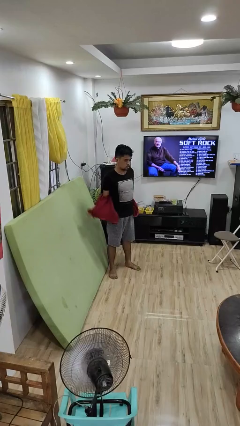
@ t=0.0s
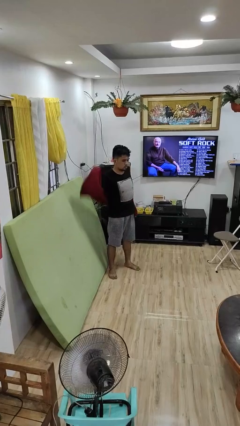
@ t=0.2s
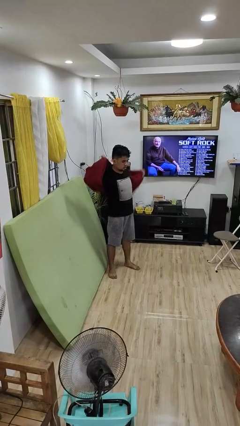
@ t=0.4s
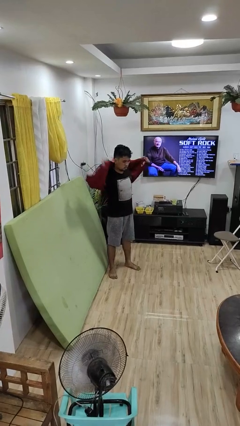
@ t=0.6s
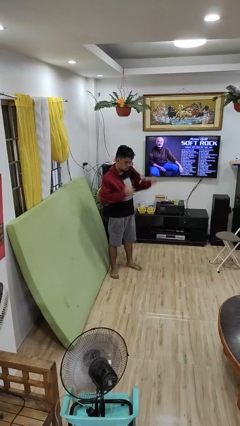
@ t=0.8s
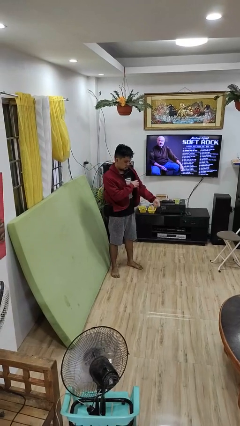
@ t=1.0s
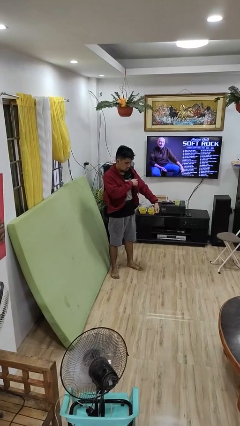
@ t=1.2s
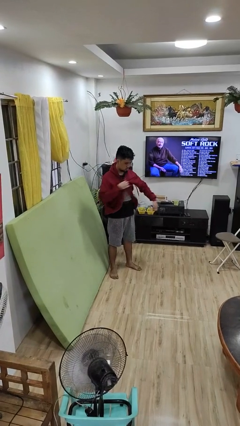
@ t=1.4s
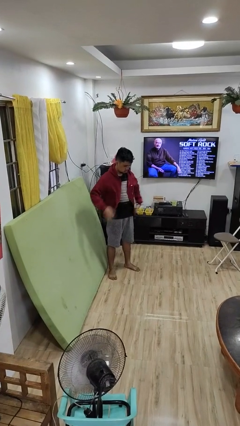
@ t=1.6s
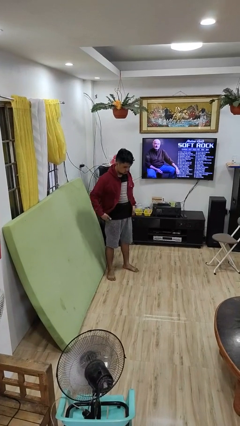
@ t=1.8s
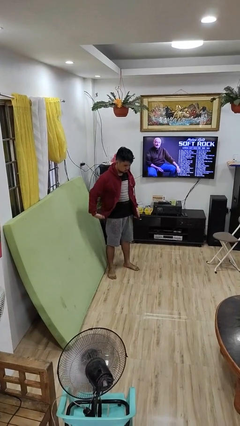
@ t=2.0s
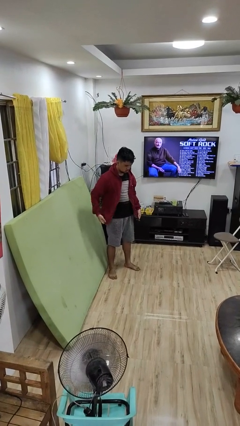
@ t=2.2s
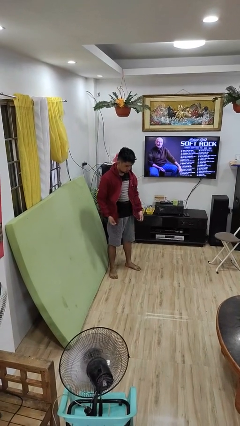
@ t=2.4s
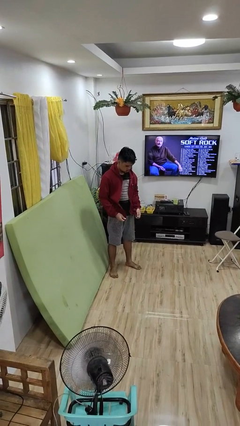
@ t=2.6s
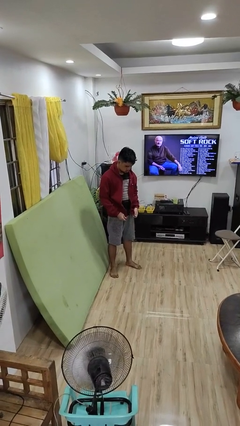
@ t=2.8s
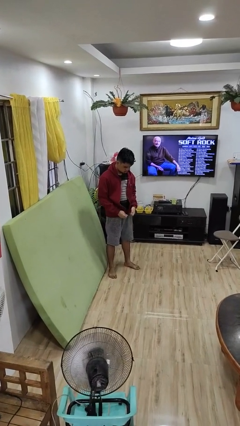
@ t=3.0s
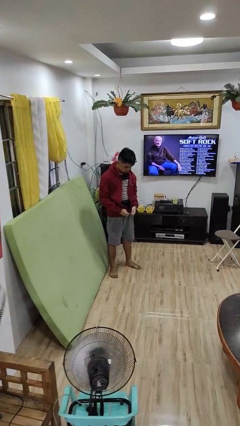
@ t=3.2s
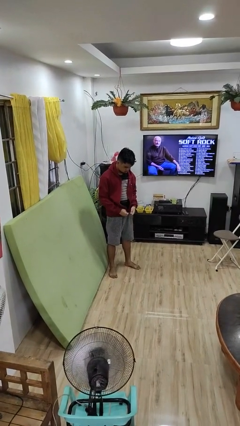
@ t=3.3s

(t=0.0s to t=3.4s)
person puts on jacket

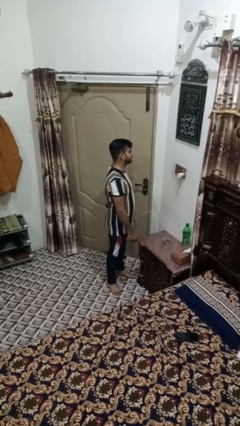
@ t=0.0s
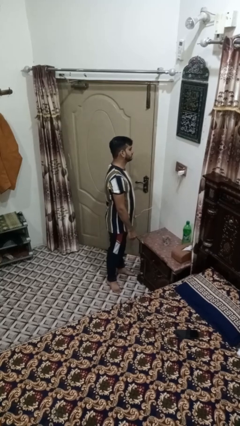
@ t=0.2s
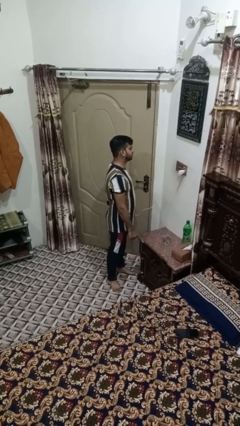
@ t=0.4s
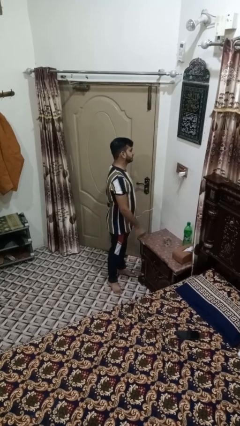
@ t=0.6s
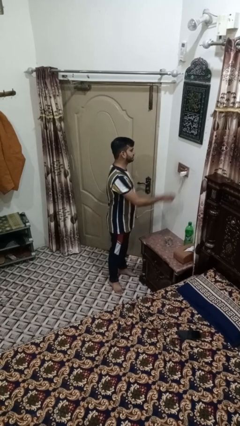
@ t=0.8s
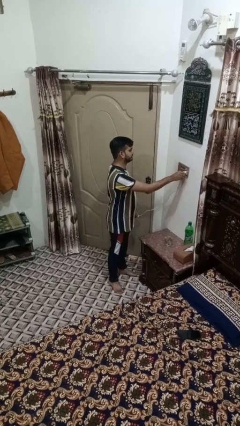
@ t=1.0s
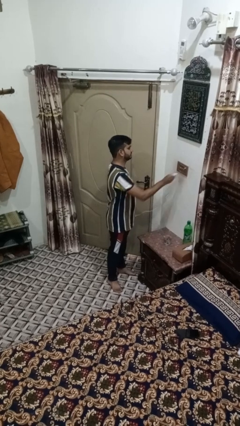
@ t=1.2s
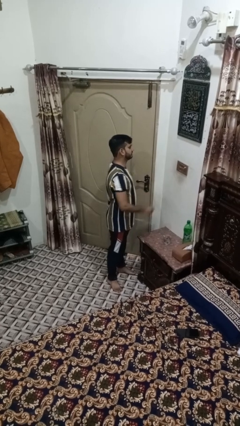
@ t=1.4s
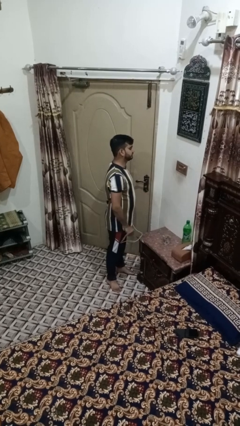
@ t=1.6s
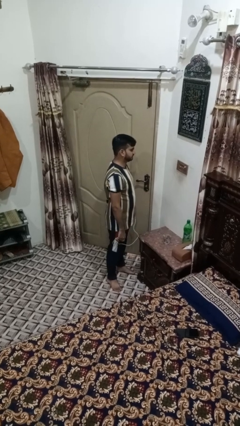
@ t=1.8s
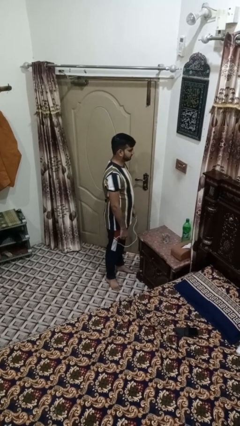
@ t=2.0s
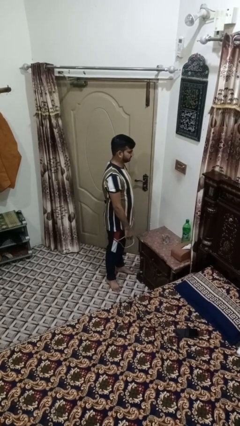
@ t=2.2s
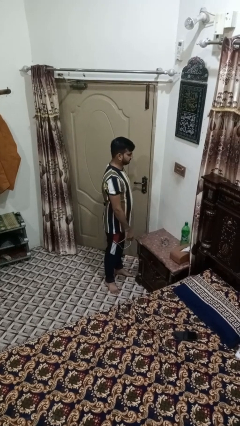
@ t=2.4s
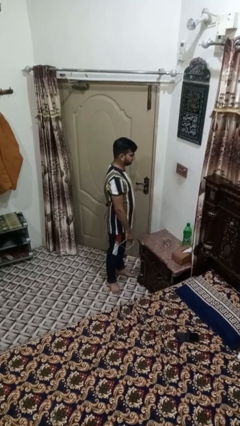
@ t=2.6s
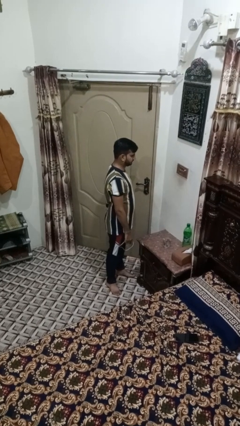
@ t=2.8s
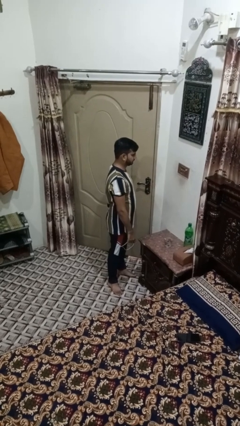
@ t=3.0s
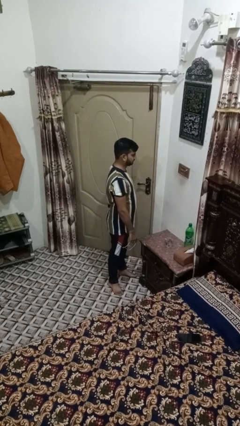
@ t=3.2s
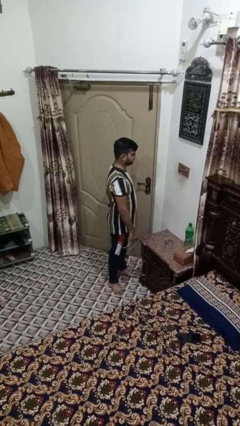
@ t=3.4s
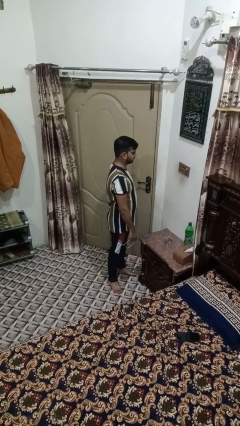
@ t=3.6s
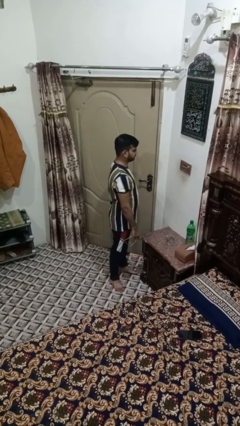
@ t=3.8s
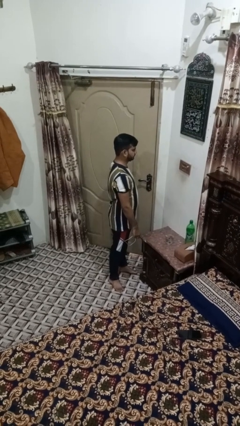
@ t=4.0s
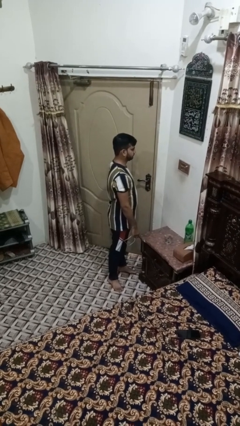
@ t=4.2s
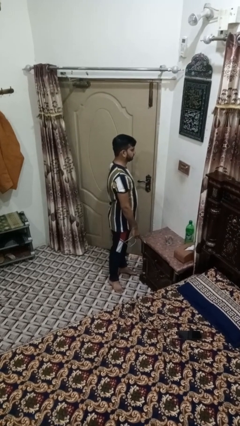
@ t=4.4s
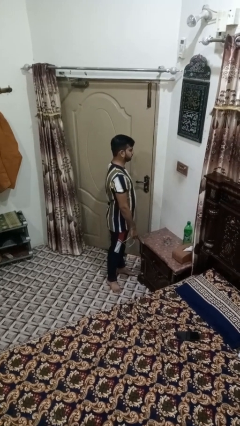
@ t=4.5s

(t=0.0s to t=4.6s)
person unplugs from electrical socket

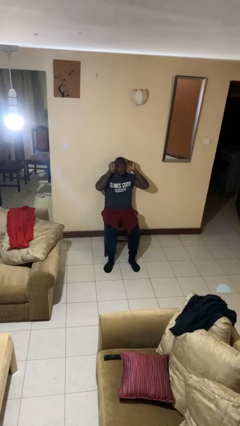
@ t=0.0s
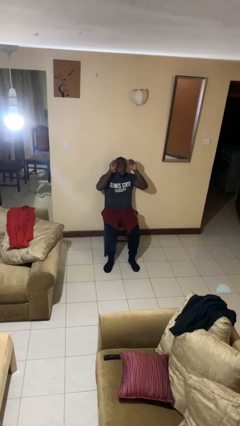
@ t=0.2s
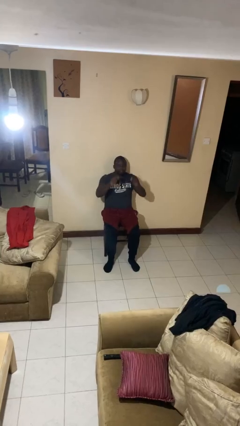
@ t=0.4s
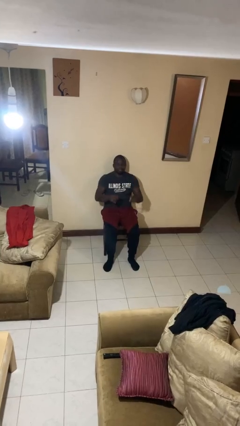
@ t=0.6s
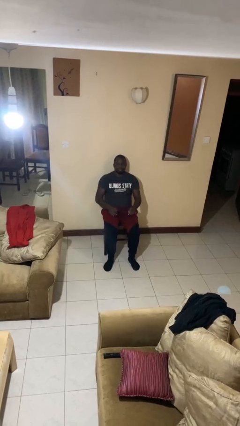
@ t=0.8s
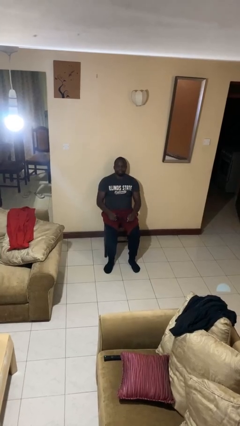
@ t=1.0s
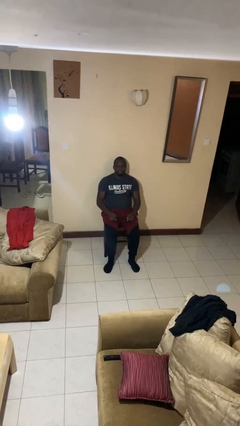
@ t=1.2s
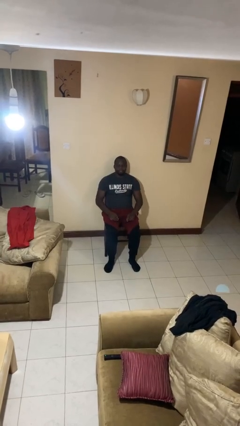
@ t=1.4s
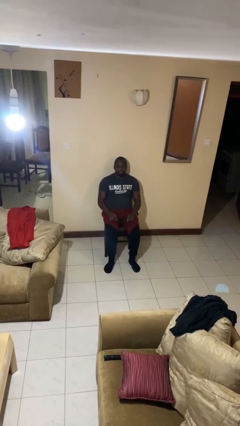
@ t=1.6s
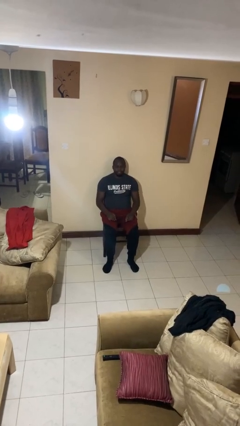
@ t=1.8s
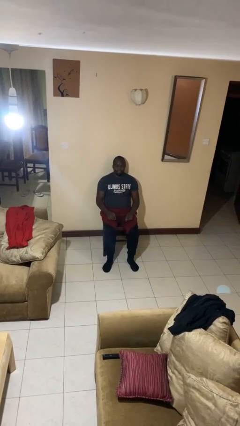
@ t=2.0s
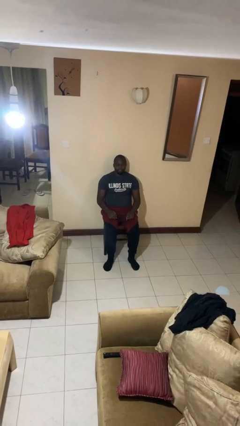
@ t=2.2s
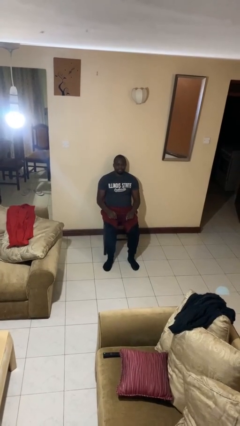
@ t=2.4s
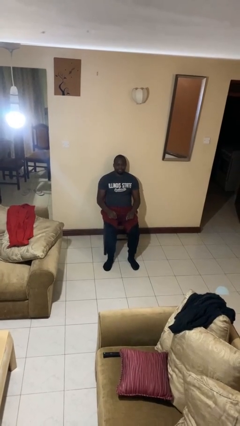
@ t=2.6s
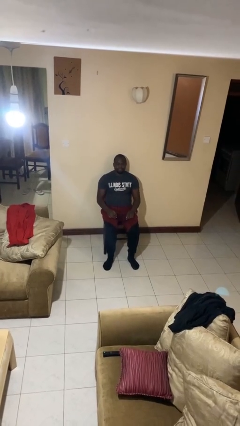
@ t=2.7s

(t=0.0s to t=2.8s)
person takes off glasses

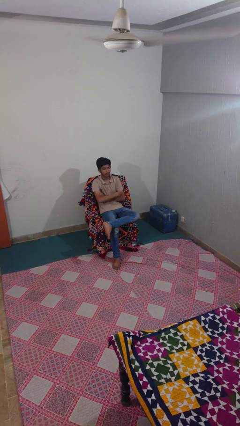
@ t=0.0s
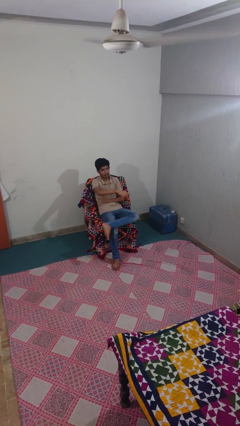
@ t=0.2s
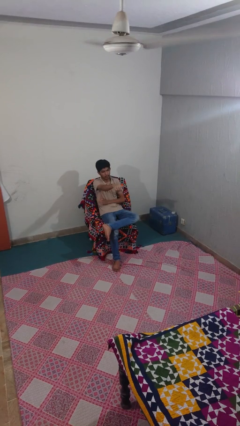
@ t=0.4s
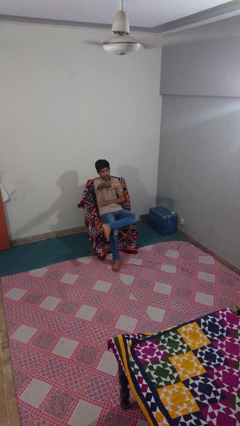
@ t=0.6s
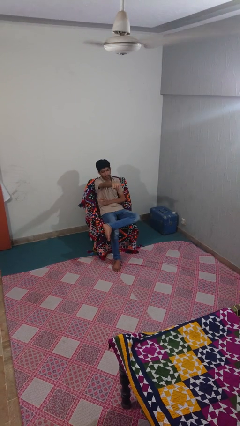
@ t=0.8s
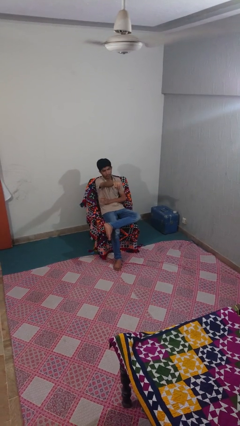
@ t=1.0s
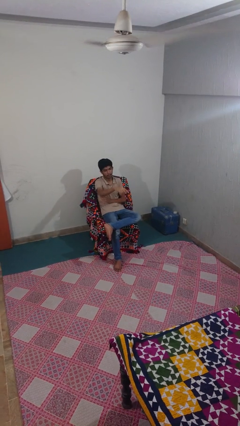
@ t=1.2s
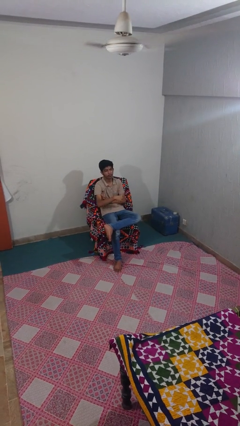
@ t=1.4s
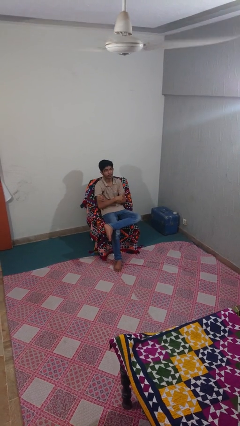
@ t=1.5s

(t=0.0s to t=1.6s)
person points at person

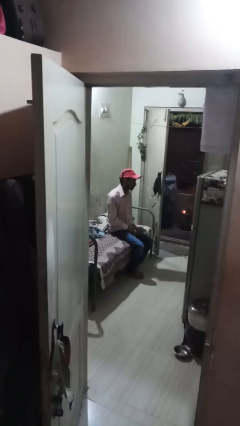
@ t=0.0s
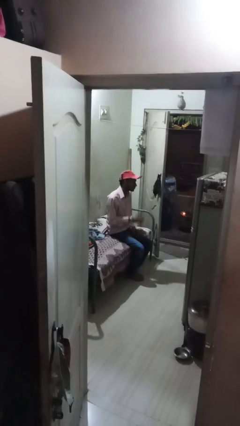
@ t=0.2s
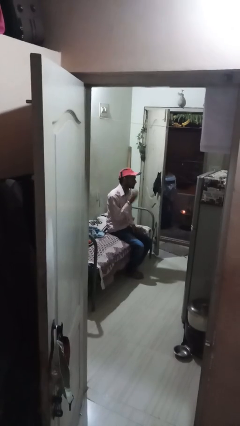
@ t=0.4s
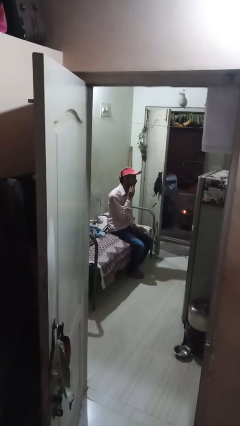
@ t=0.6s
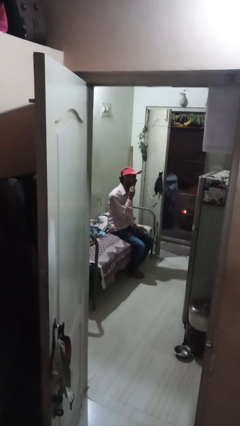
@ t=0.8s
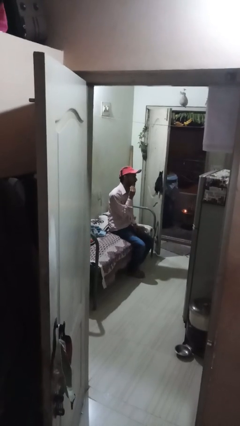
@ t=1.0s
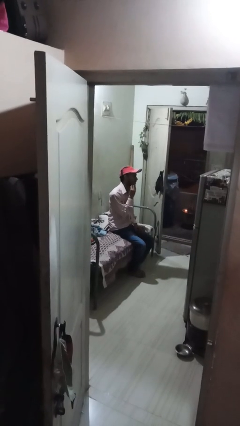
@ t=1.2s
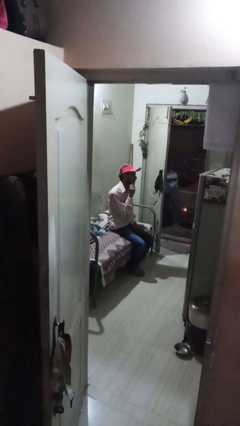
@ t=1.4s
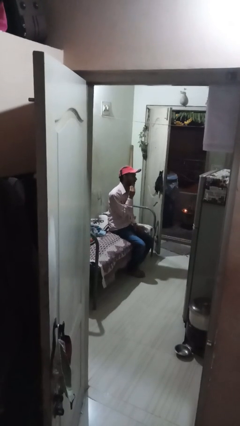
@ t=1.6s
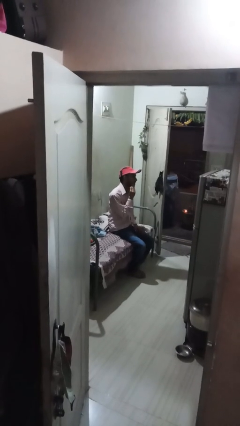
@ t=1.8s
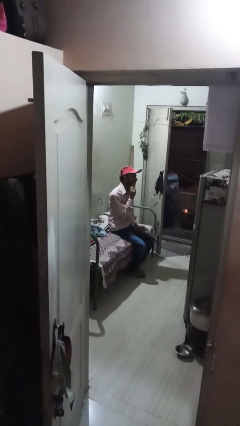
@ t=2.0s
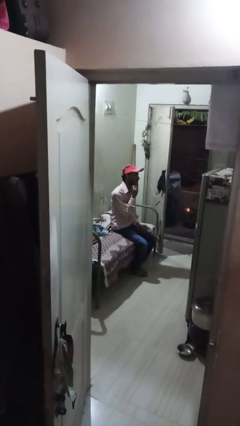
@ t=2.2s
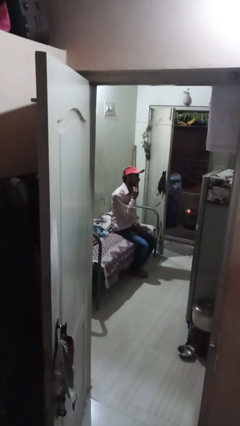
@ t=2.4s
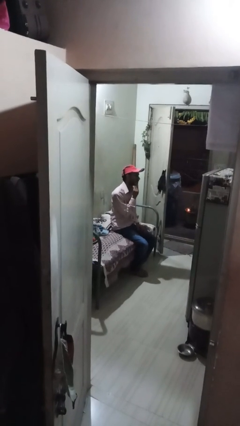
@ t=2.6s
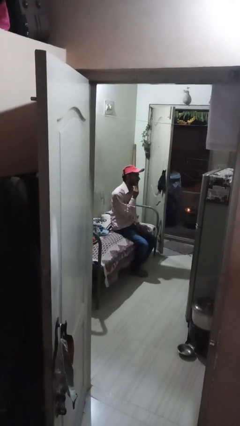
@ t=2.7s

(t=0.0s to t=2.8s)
person strokes chin

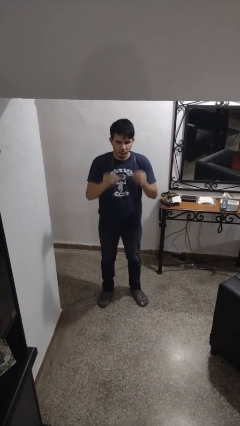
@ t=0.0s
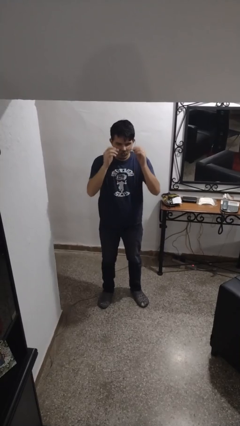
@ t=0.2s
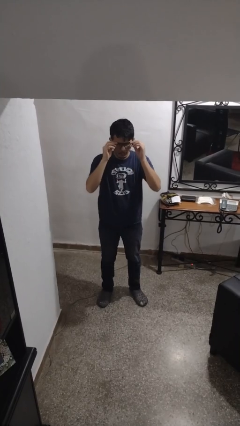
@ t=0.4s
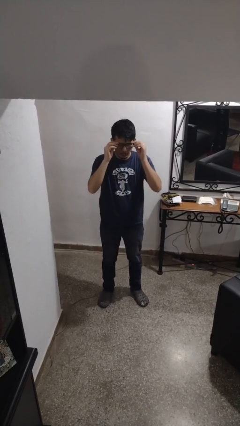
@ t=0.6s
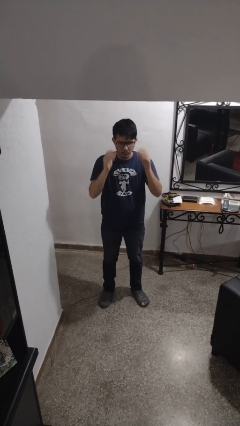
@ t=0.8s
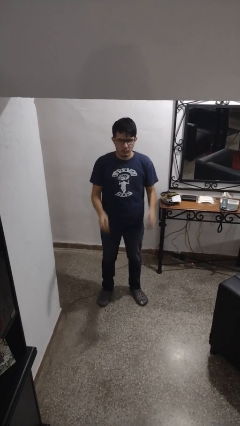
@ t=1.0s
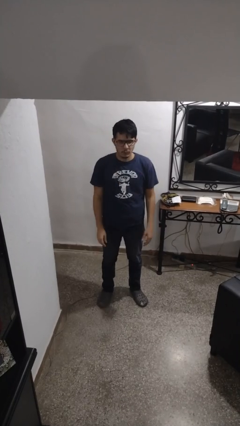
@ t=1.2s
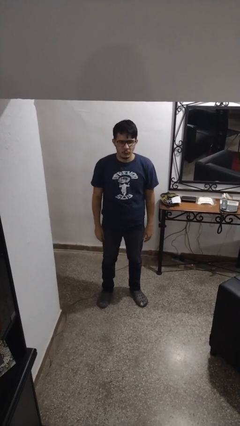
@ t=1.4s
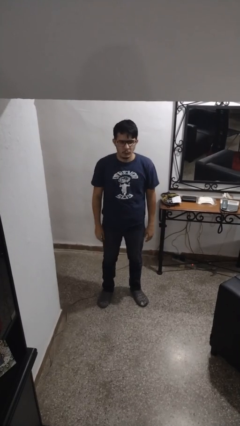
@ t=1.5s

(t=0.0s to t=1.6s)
person puts on glasses

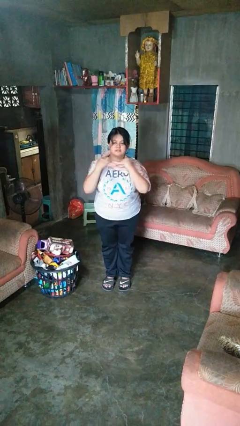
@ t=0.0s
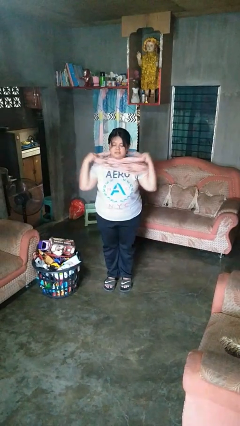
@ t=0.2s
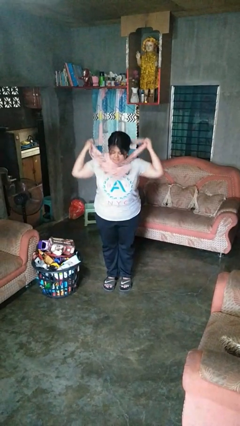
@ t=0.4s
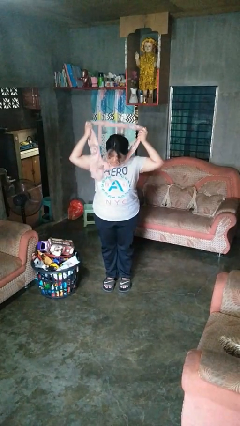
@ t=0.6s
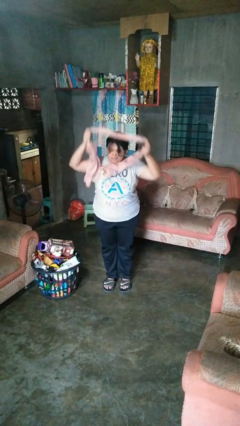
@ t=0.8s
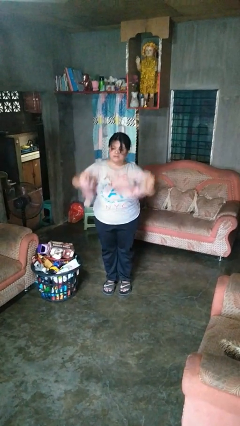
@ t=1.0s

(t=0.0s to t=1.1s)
person takes off scarf
